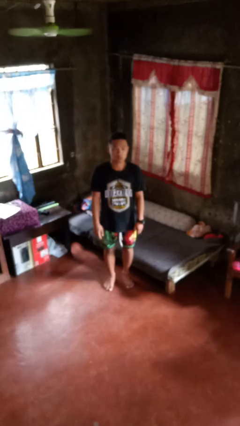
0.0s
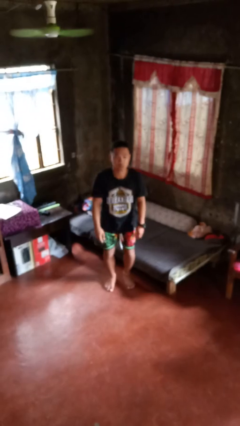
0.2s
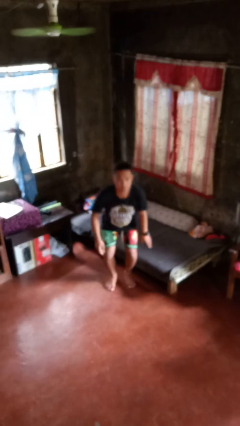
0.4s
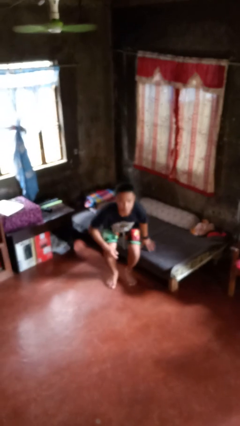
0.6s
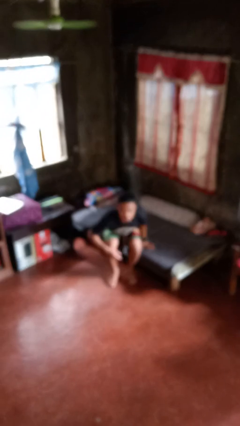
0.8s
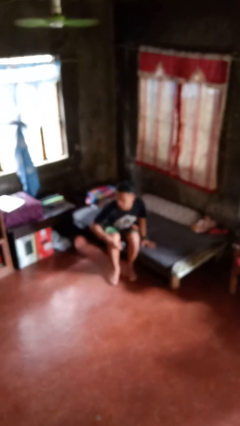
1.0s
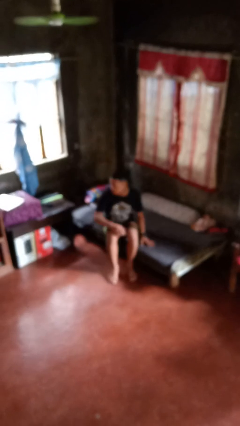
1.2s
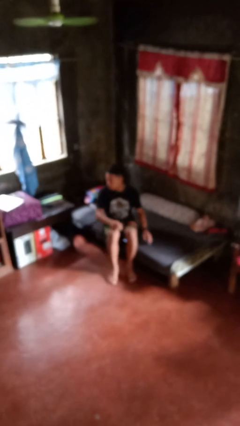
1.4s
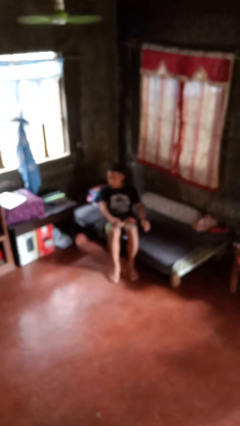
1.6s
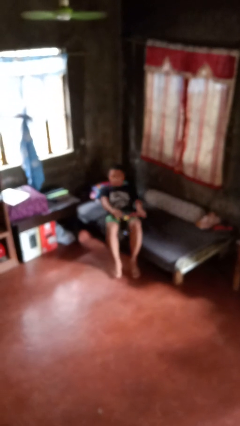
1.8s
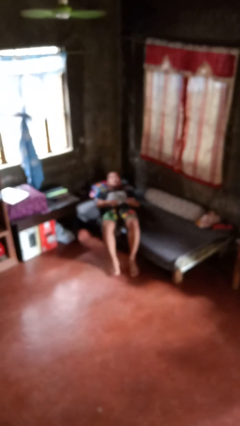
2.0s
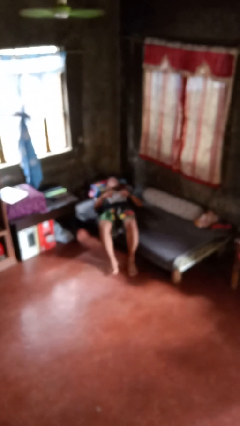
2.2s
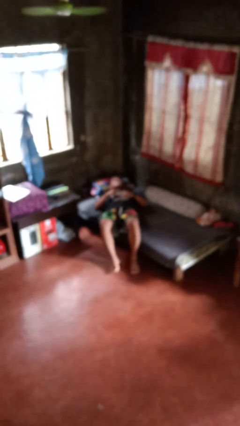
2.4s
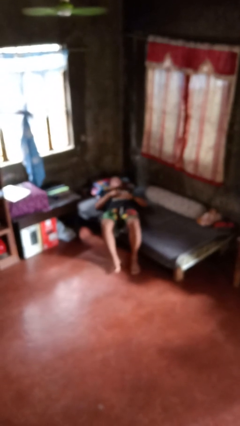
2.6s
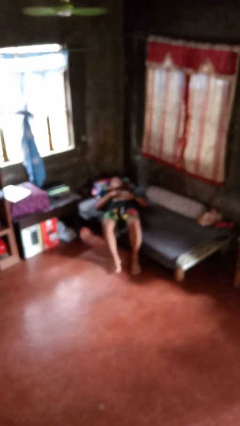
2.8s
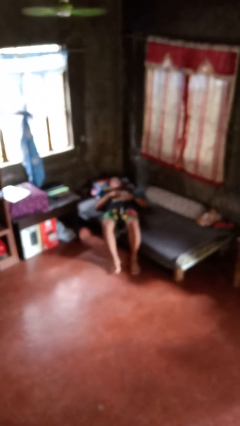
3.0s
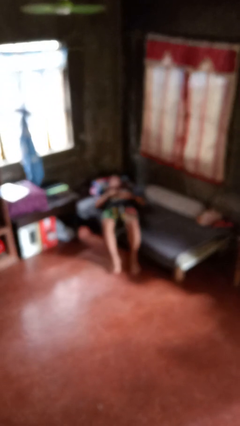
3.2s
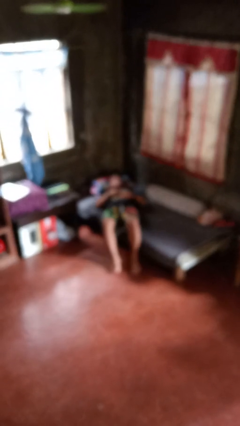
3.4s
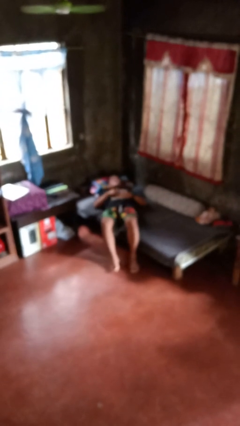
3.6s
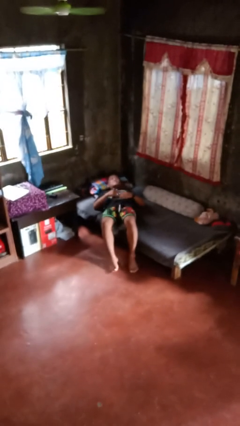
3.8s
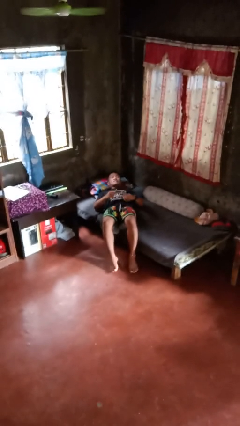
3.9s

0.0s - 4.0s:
person lies down on bed

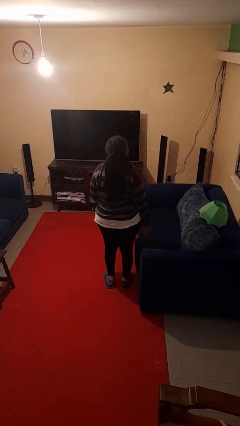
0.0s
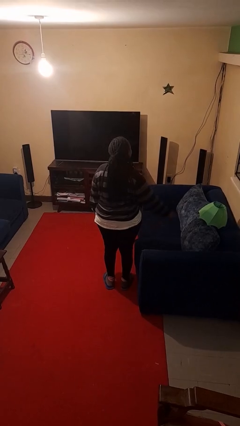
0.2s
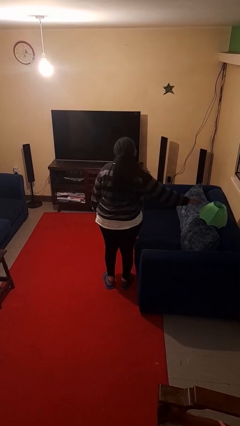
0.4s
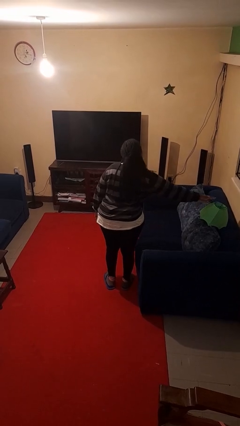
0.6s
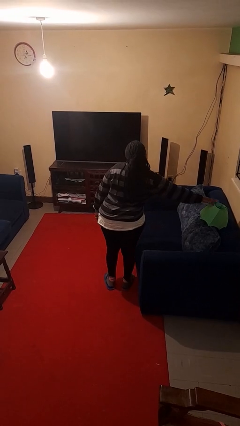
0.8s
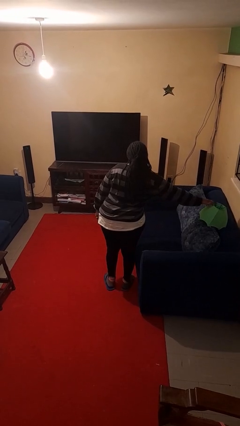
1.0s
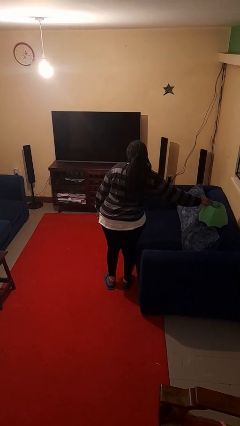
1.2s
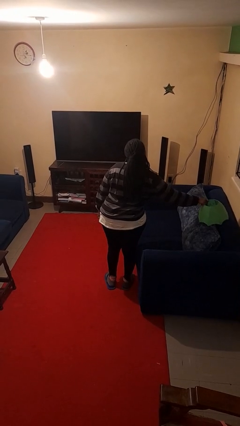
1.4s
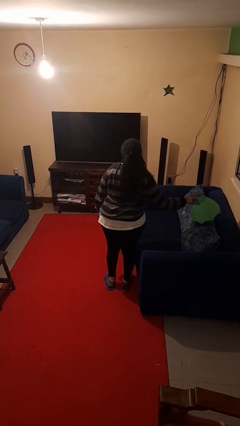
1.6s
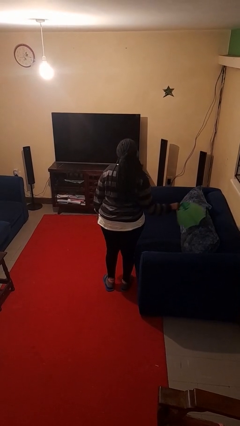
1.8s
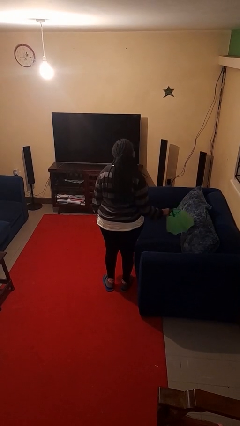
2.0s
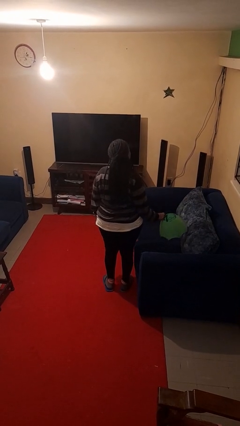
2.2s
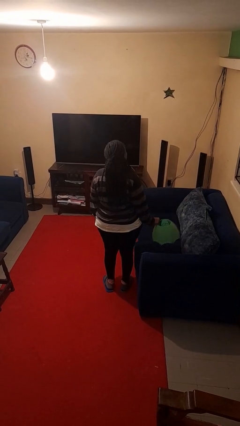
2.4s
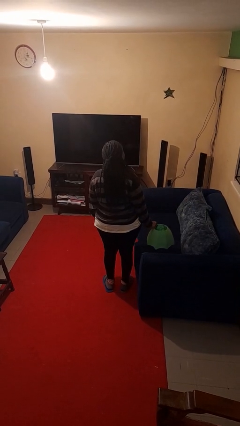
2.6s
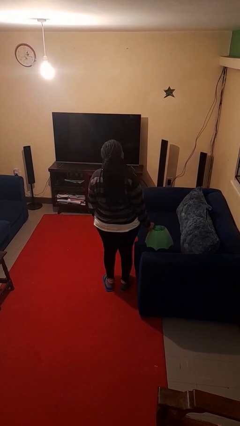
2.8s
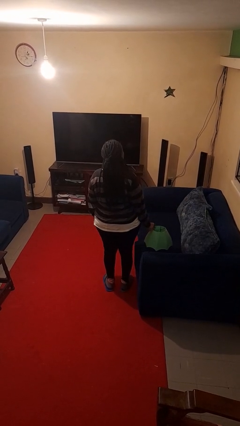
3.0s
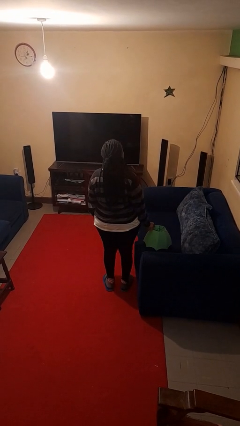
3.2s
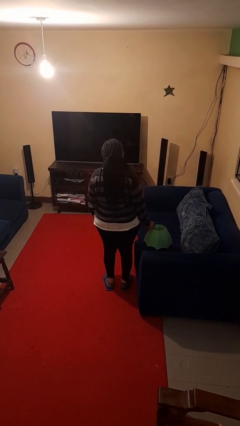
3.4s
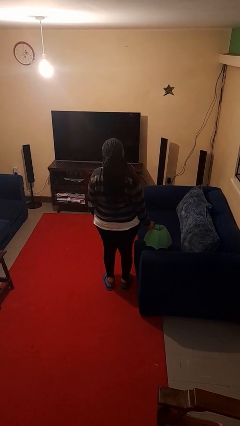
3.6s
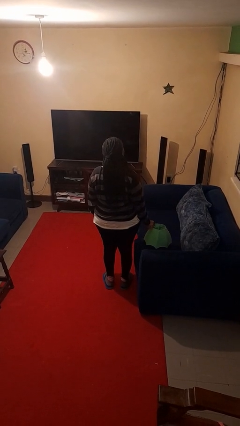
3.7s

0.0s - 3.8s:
person picks up object from couch

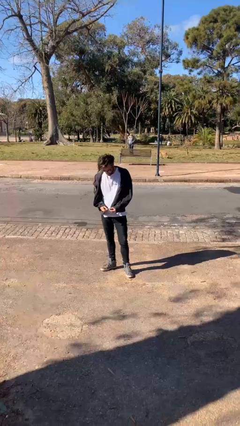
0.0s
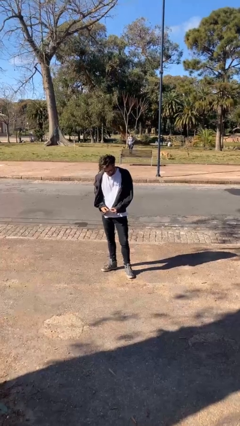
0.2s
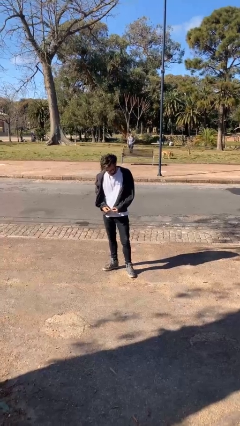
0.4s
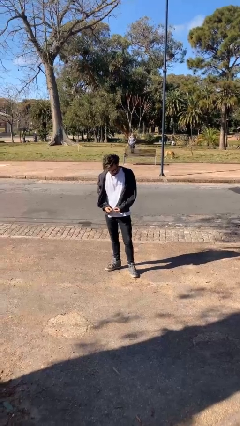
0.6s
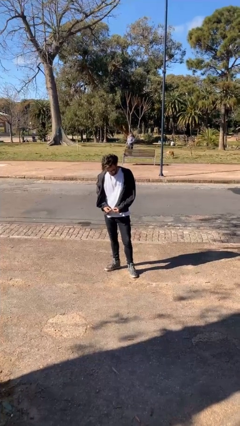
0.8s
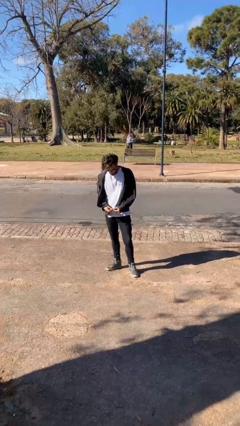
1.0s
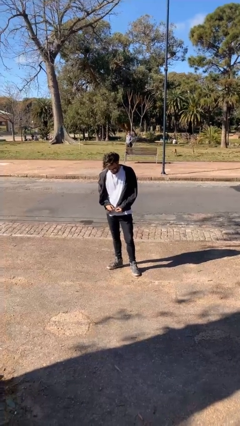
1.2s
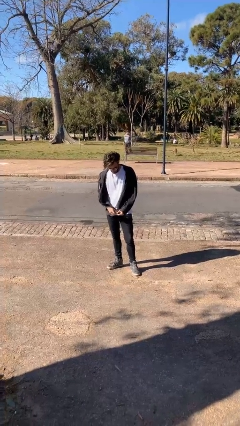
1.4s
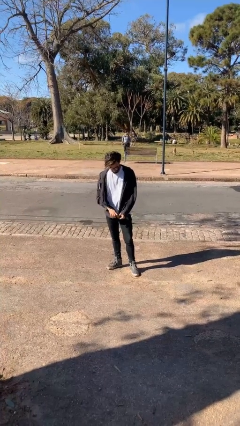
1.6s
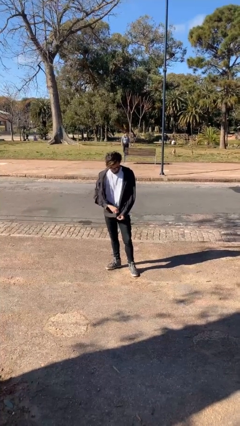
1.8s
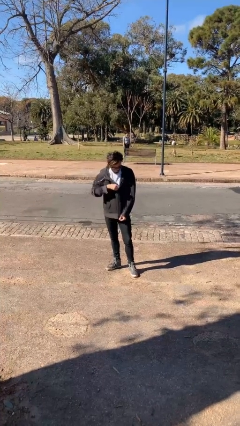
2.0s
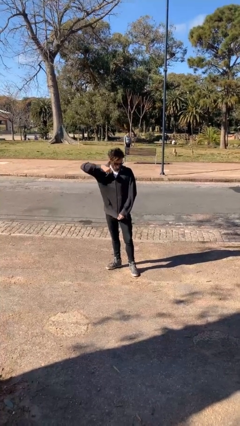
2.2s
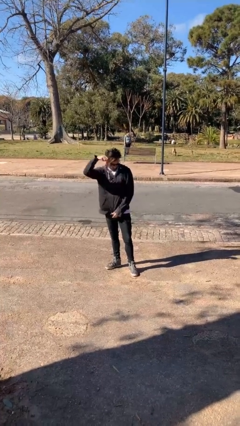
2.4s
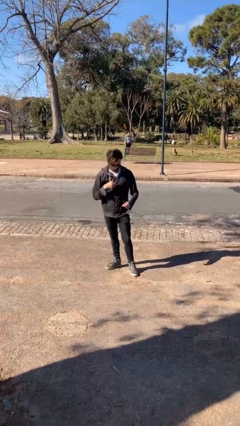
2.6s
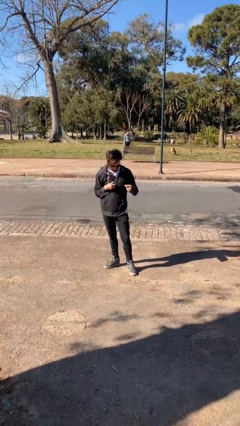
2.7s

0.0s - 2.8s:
person zips up jacket

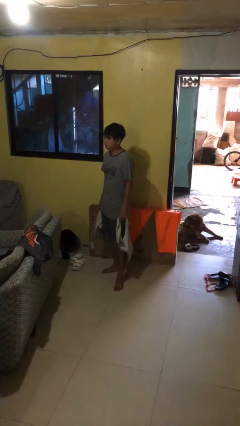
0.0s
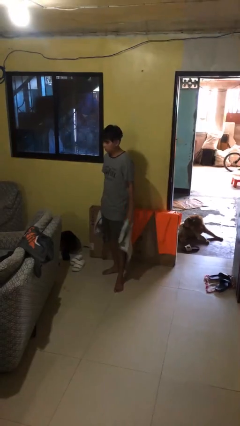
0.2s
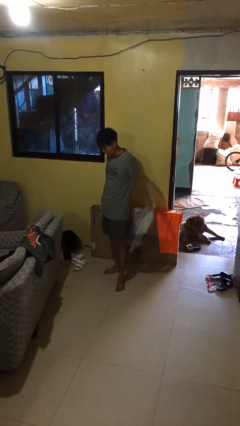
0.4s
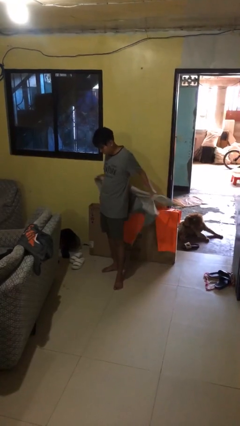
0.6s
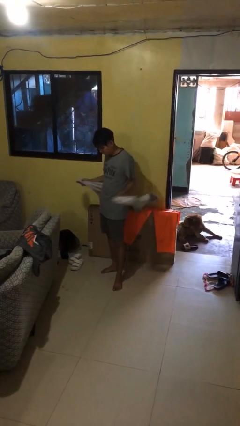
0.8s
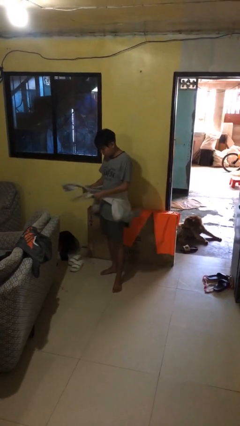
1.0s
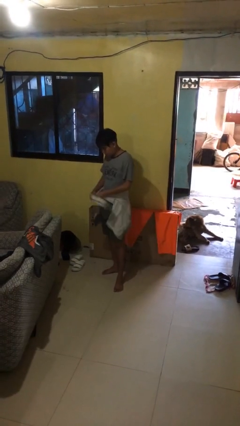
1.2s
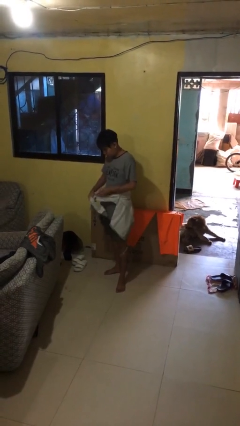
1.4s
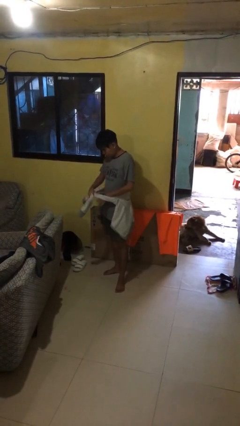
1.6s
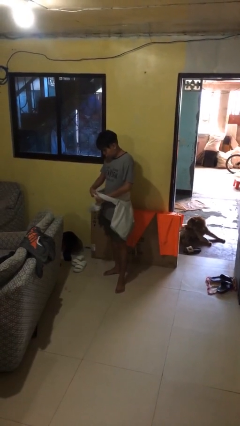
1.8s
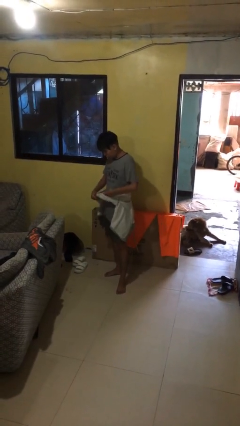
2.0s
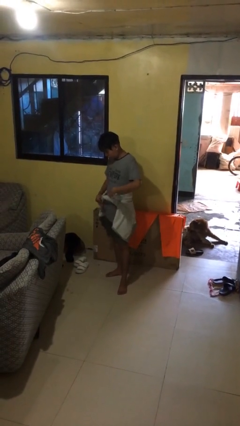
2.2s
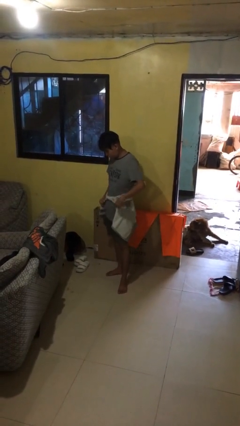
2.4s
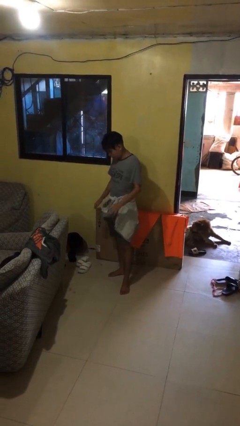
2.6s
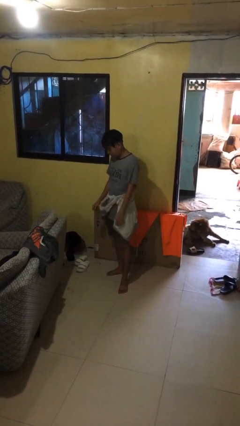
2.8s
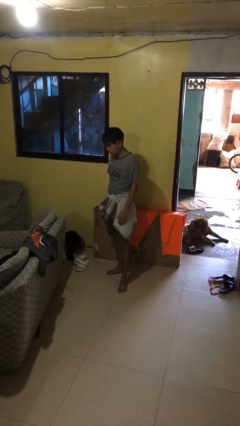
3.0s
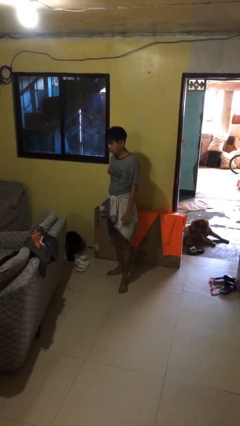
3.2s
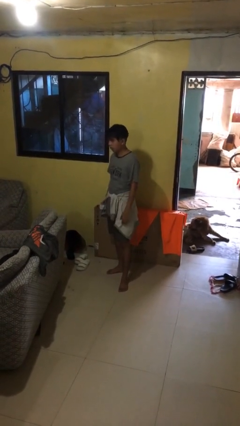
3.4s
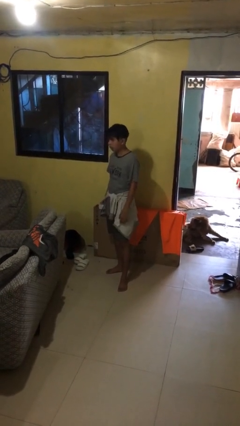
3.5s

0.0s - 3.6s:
person ties jacket around waist

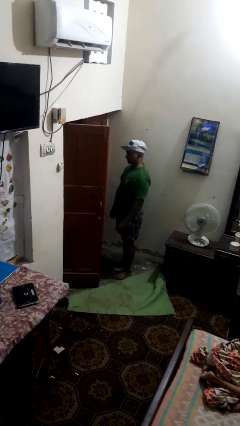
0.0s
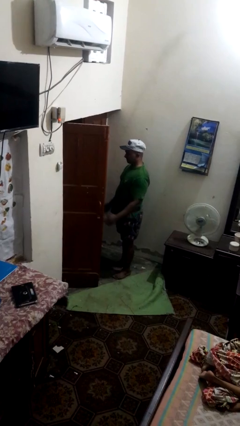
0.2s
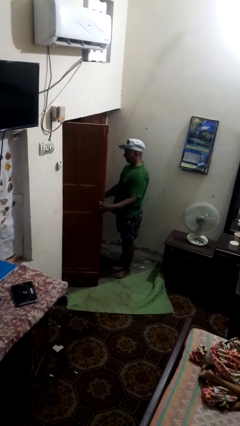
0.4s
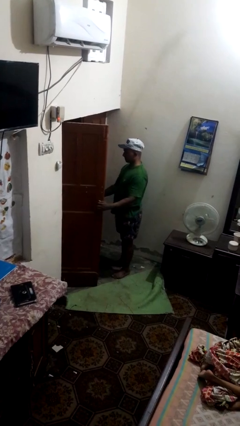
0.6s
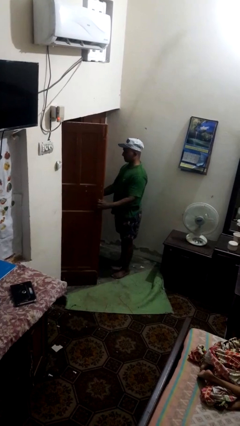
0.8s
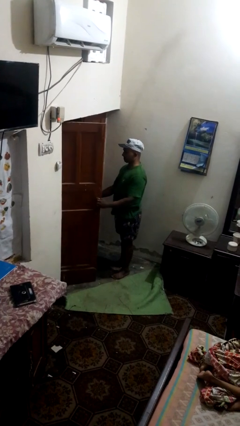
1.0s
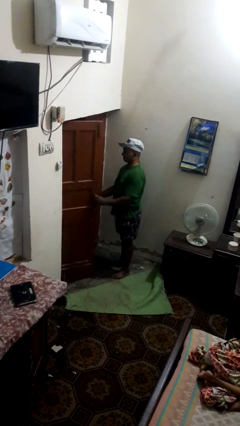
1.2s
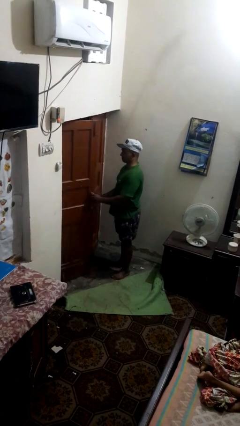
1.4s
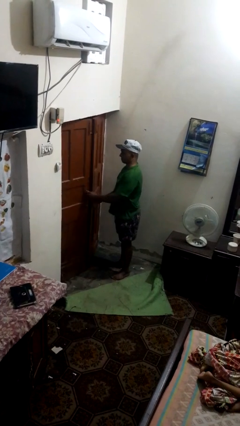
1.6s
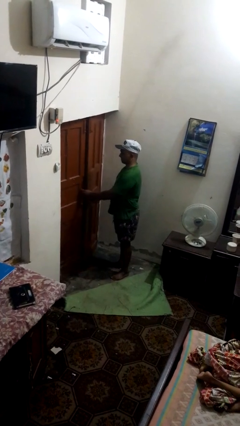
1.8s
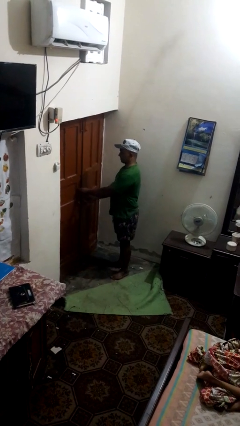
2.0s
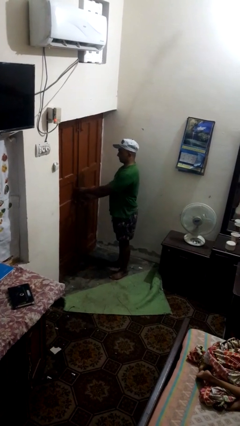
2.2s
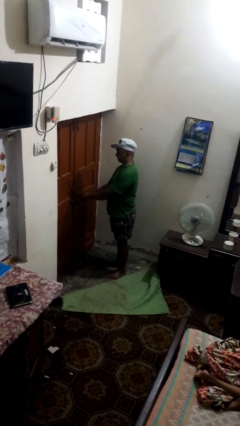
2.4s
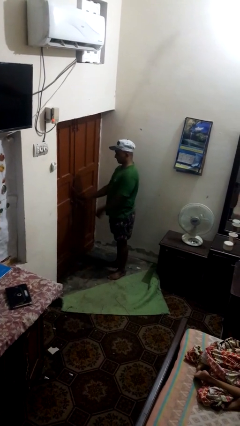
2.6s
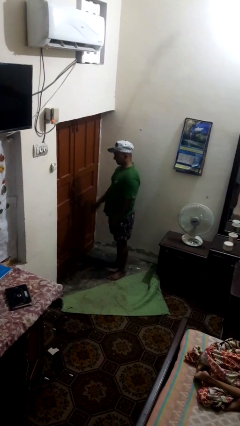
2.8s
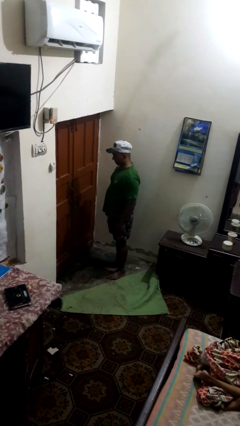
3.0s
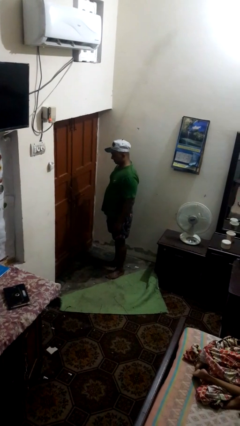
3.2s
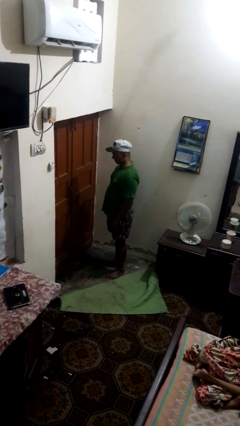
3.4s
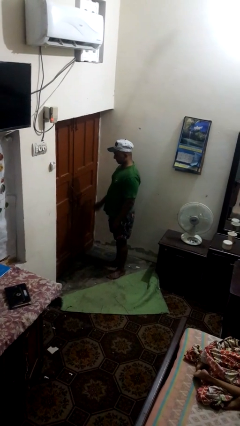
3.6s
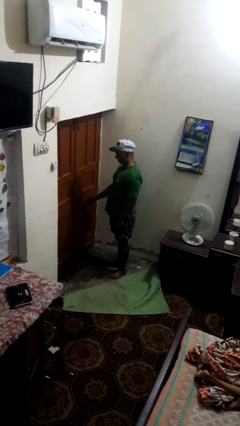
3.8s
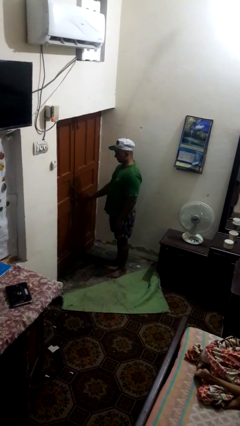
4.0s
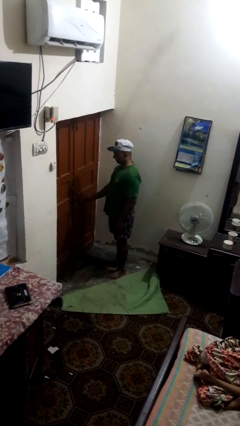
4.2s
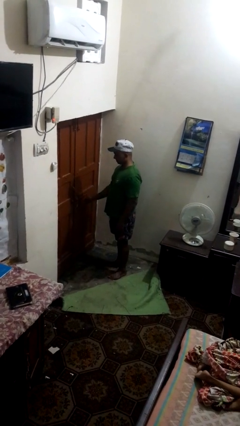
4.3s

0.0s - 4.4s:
person closes facility door
